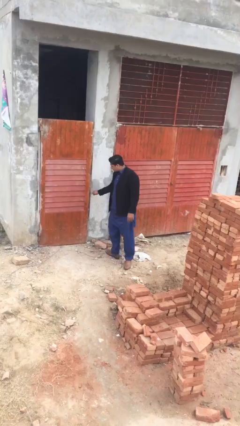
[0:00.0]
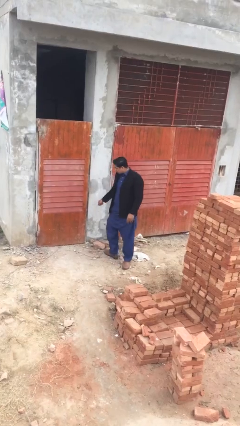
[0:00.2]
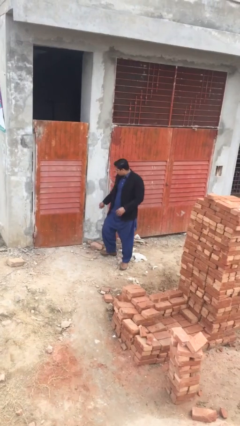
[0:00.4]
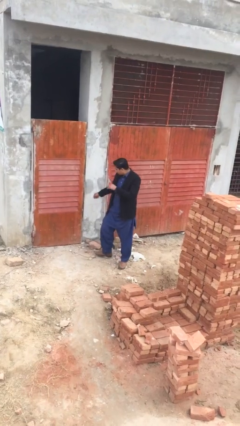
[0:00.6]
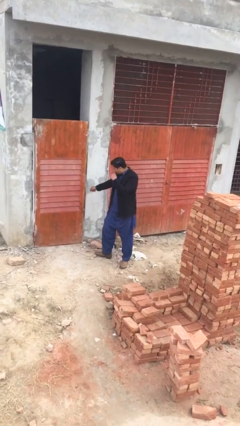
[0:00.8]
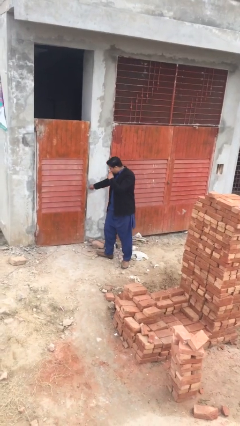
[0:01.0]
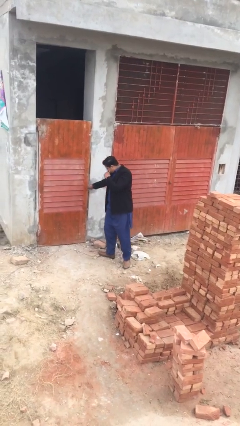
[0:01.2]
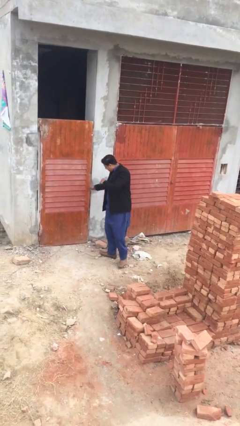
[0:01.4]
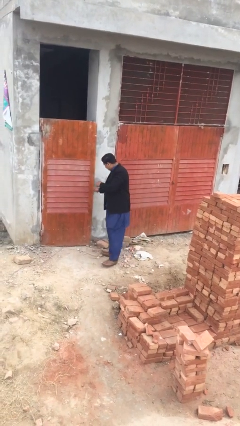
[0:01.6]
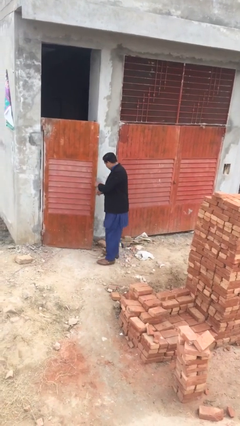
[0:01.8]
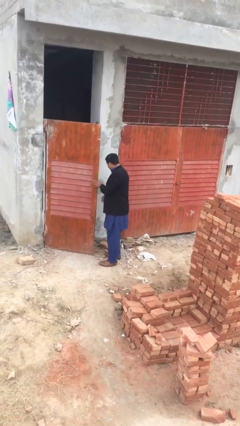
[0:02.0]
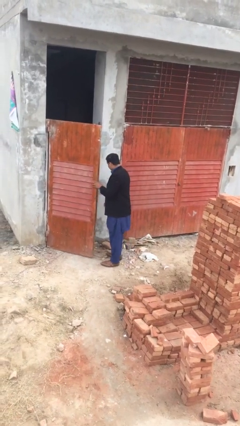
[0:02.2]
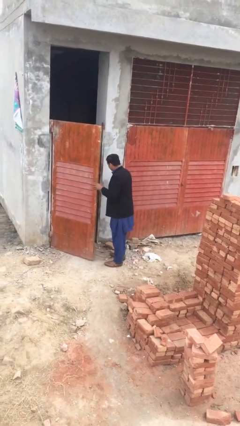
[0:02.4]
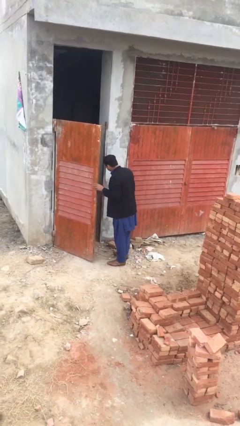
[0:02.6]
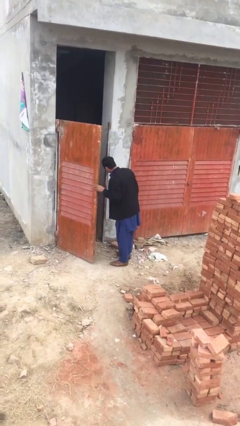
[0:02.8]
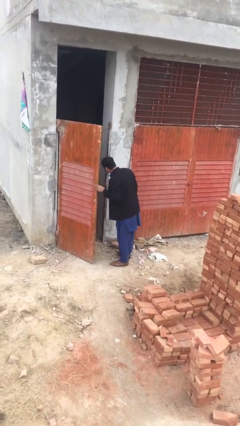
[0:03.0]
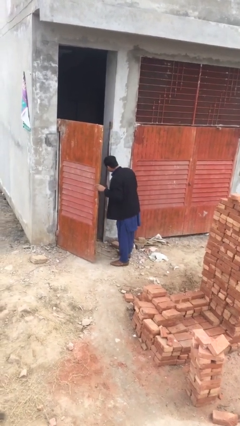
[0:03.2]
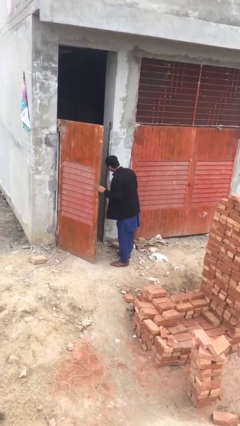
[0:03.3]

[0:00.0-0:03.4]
person opens facility door

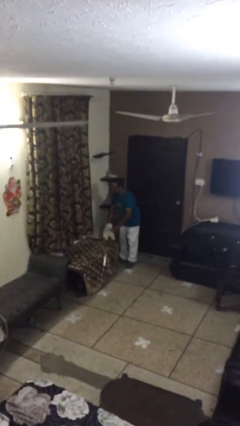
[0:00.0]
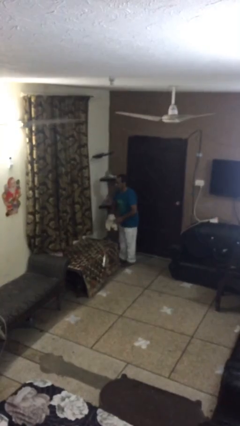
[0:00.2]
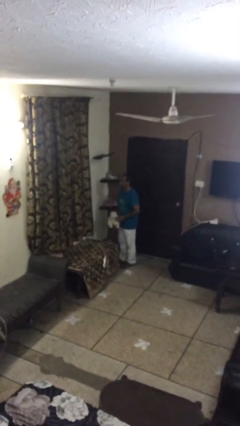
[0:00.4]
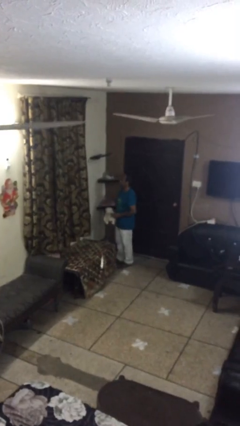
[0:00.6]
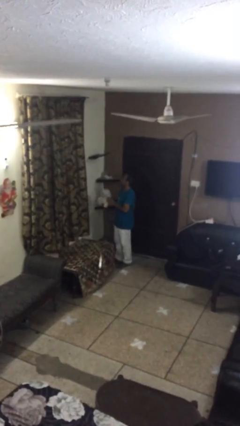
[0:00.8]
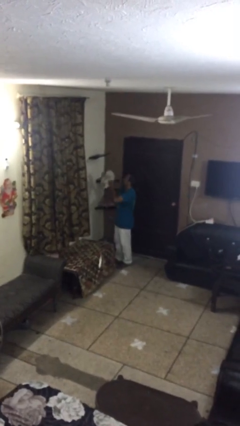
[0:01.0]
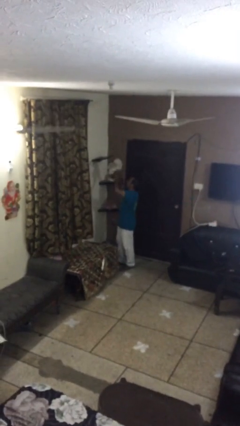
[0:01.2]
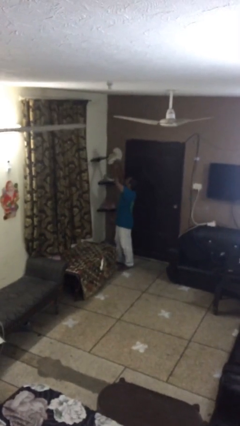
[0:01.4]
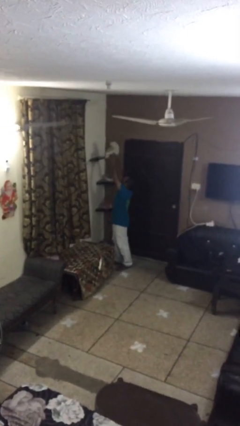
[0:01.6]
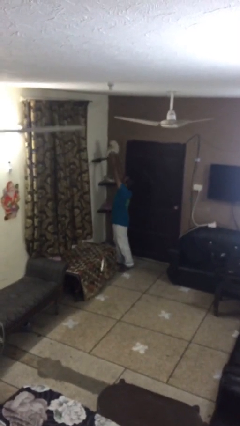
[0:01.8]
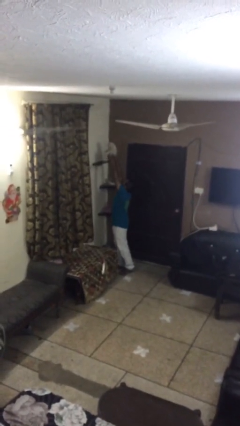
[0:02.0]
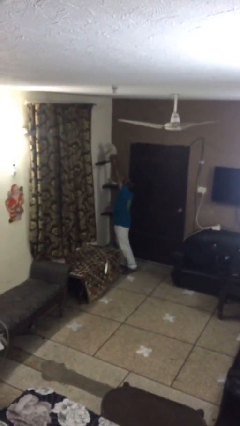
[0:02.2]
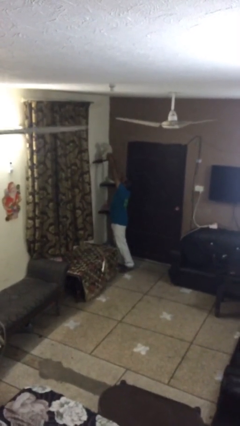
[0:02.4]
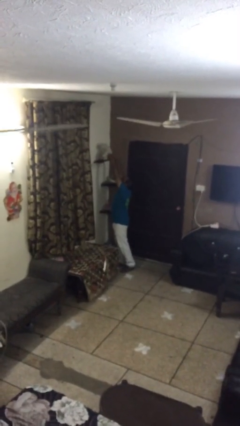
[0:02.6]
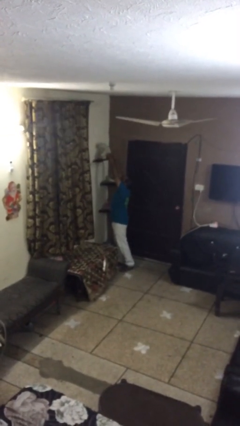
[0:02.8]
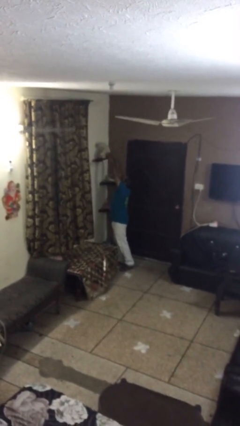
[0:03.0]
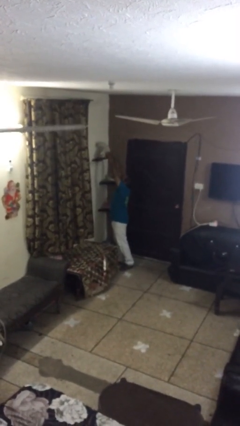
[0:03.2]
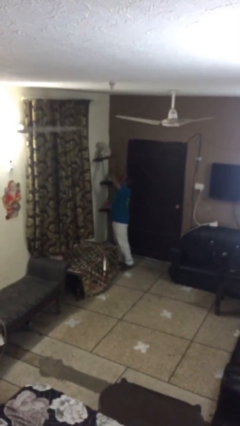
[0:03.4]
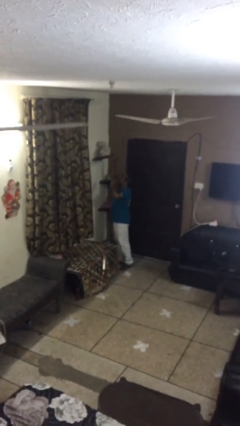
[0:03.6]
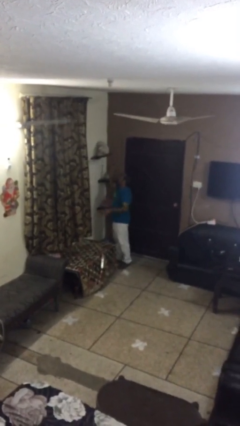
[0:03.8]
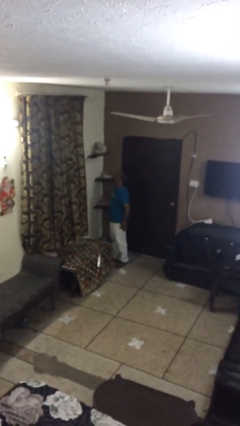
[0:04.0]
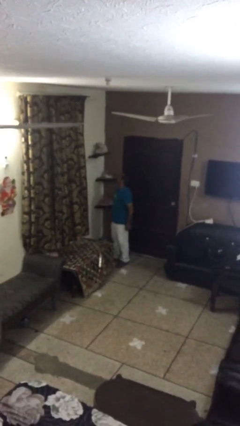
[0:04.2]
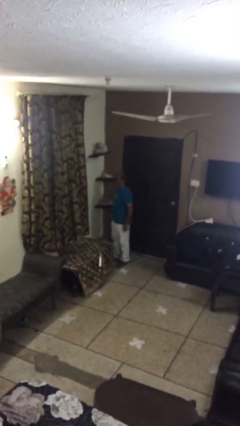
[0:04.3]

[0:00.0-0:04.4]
person puts down object on shelf

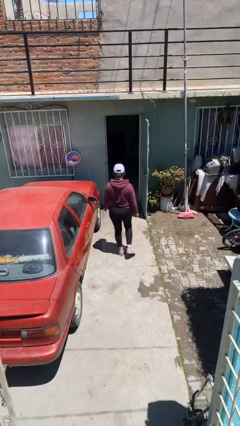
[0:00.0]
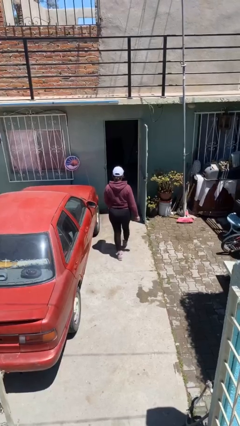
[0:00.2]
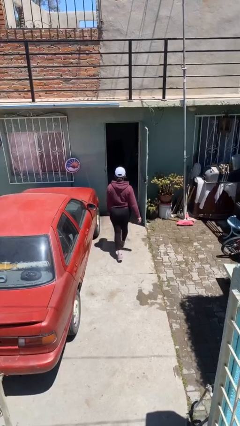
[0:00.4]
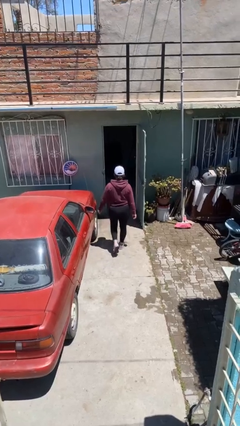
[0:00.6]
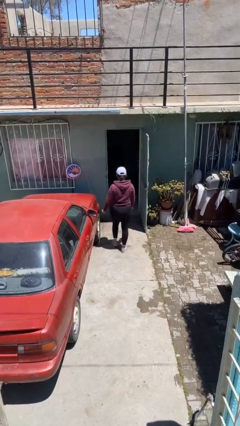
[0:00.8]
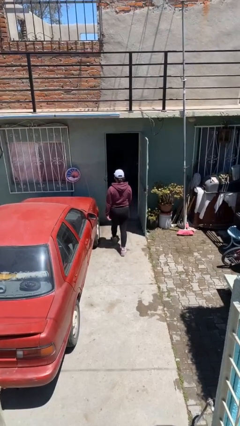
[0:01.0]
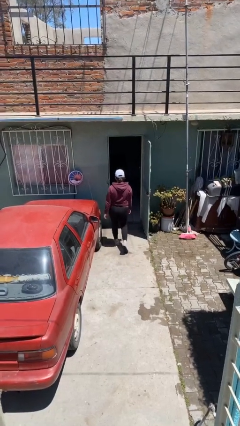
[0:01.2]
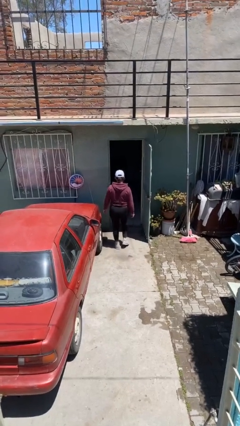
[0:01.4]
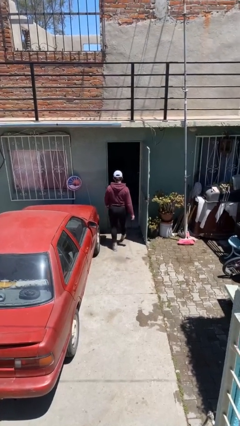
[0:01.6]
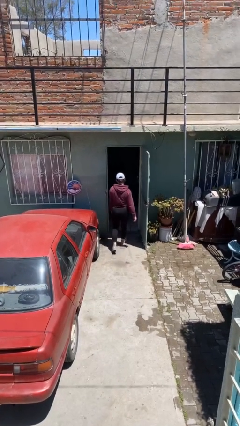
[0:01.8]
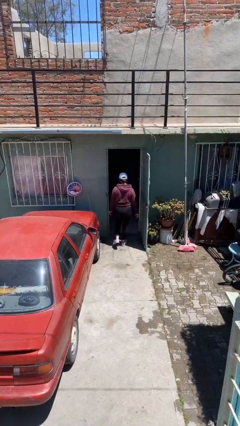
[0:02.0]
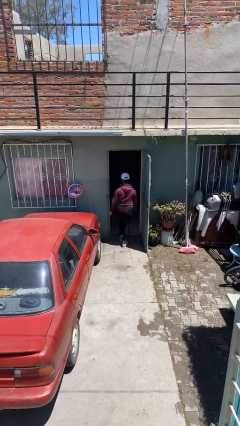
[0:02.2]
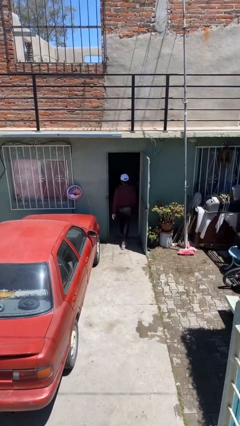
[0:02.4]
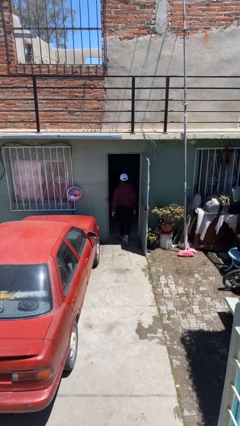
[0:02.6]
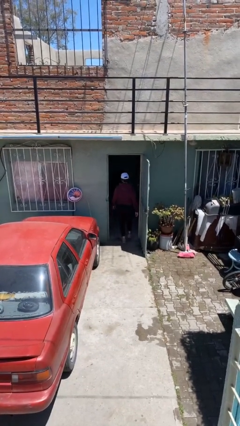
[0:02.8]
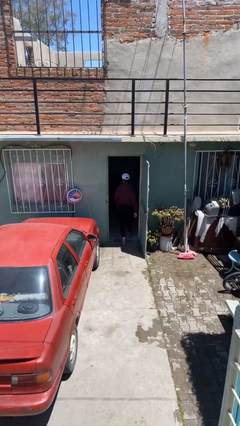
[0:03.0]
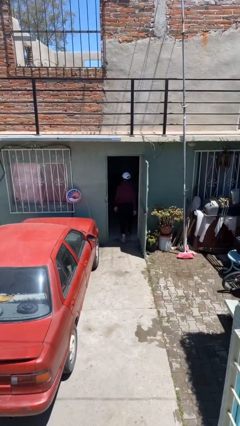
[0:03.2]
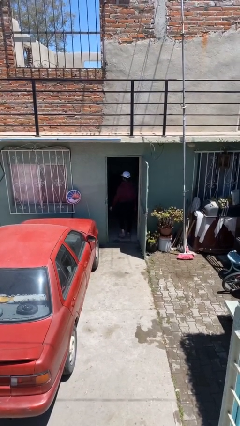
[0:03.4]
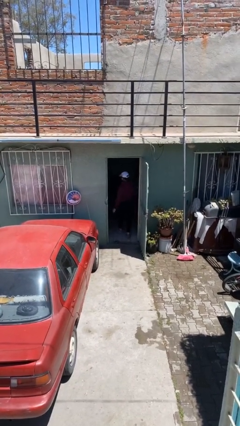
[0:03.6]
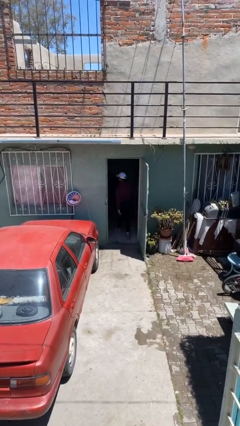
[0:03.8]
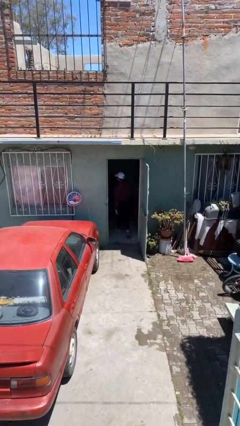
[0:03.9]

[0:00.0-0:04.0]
person exits scene through structure

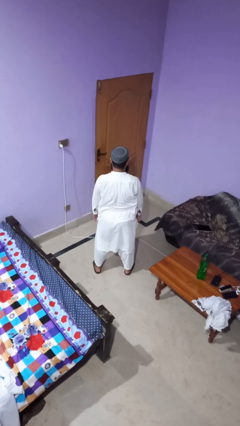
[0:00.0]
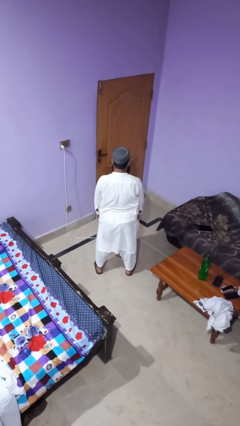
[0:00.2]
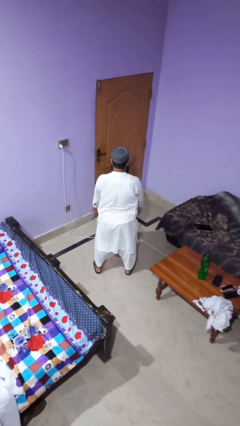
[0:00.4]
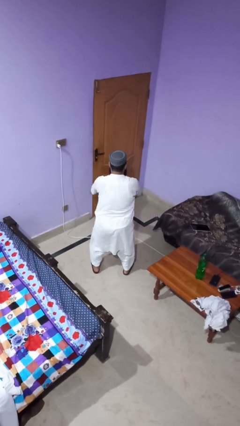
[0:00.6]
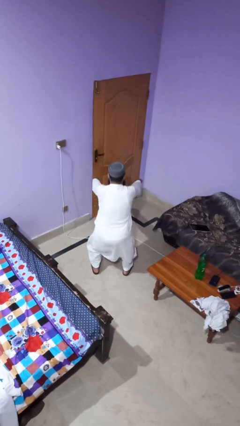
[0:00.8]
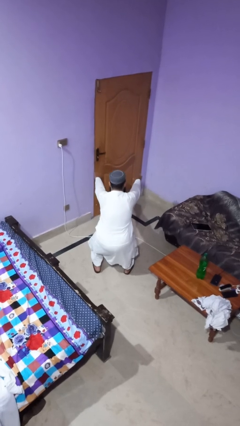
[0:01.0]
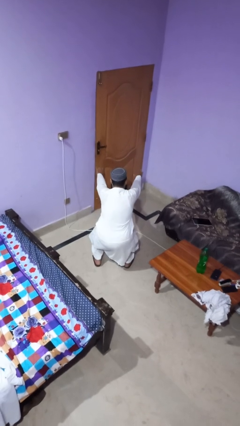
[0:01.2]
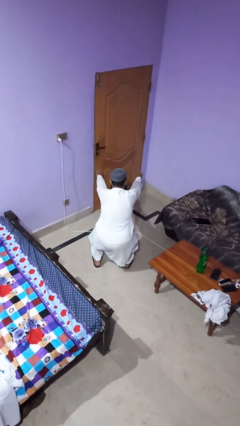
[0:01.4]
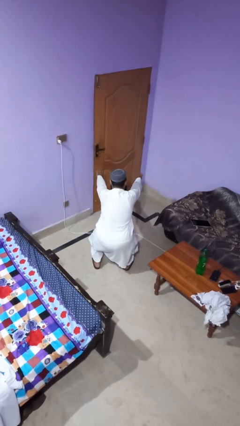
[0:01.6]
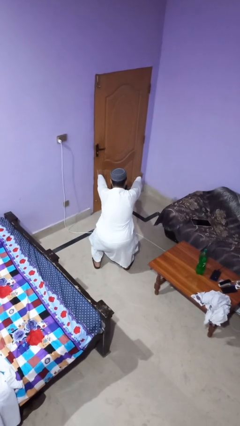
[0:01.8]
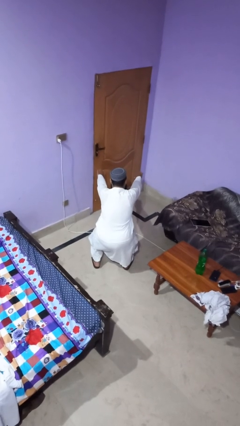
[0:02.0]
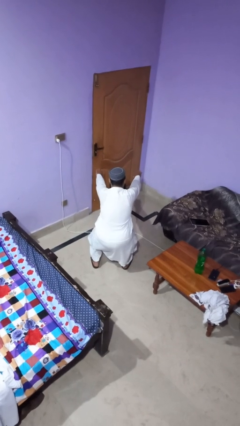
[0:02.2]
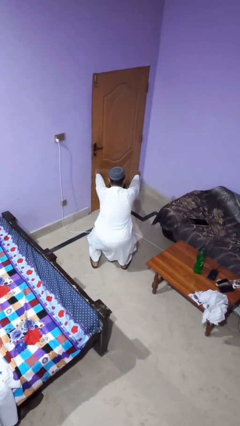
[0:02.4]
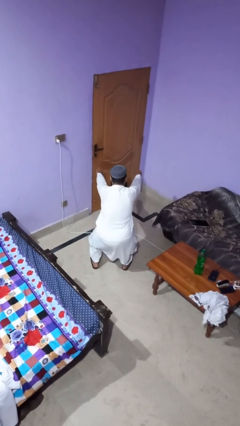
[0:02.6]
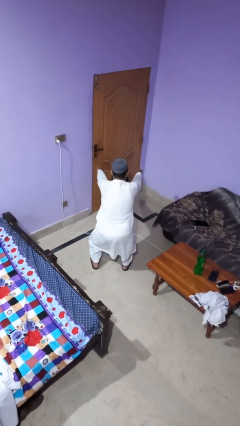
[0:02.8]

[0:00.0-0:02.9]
person squats

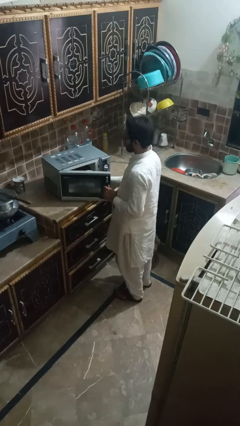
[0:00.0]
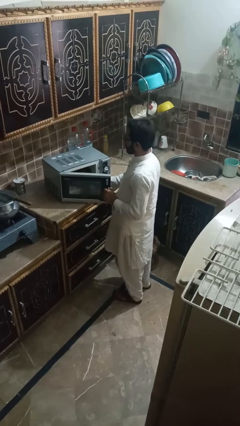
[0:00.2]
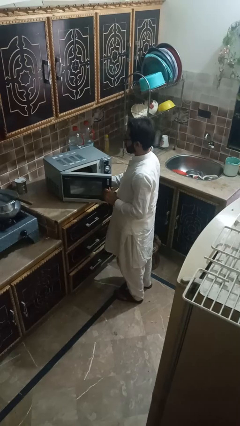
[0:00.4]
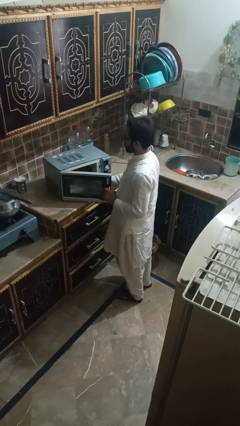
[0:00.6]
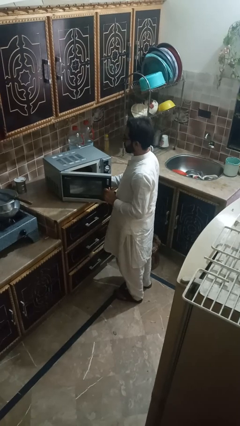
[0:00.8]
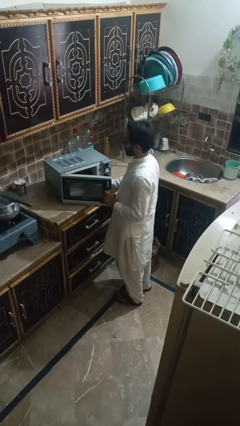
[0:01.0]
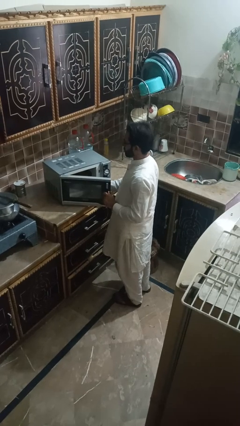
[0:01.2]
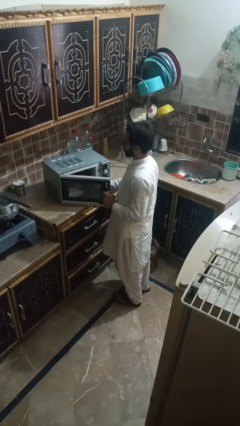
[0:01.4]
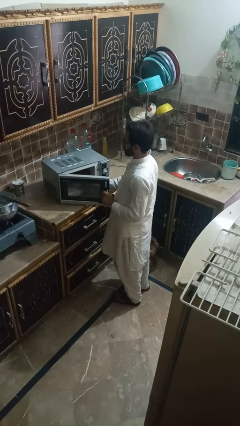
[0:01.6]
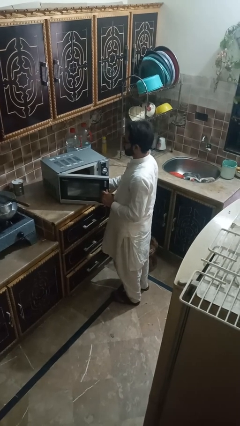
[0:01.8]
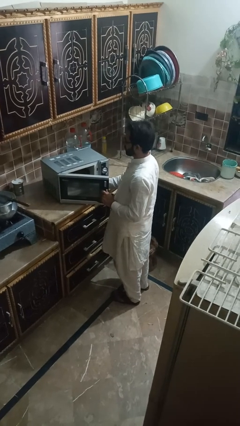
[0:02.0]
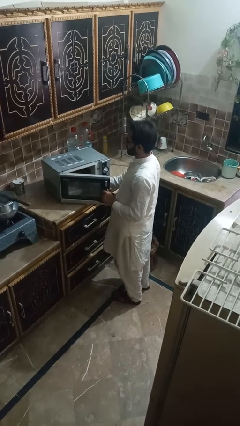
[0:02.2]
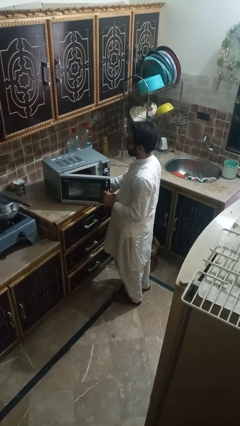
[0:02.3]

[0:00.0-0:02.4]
person puts object into microwave

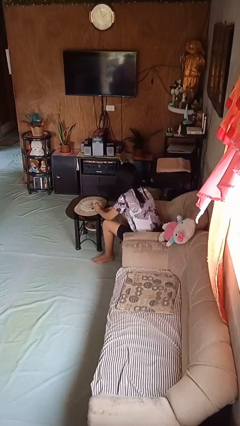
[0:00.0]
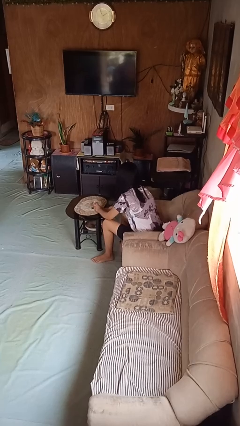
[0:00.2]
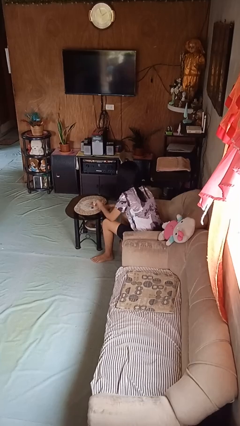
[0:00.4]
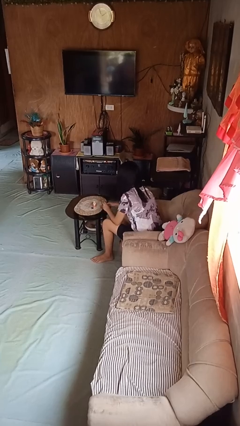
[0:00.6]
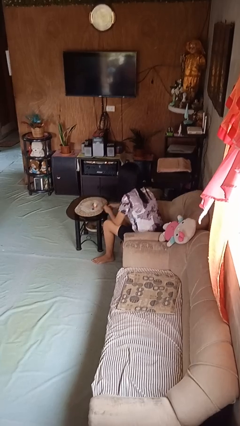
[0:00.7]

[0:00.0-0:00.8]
person paints fingernails
